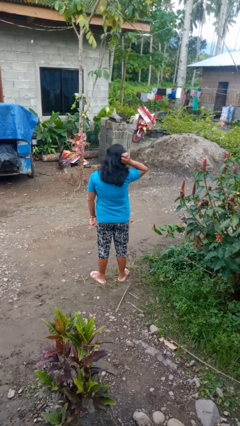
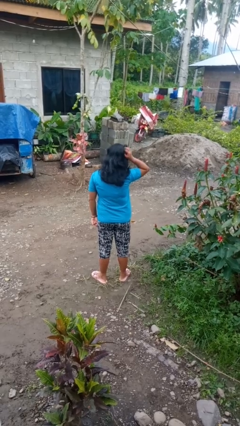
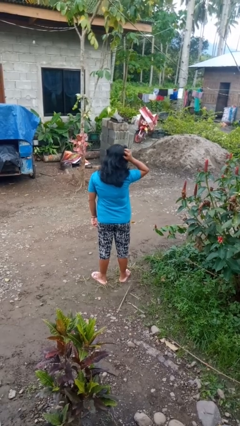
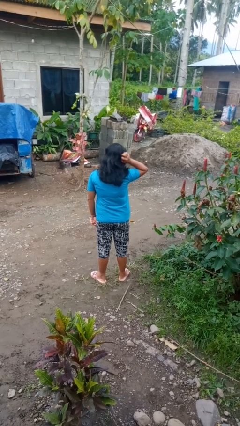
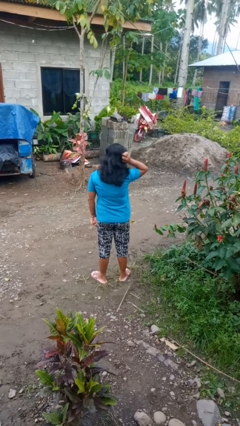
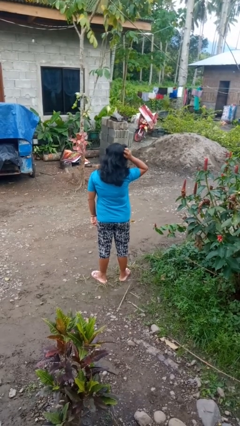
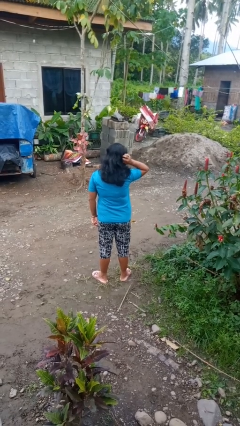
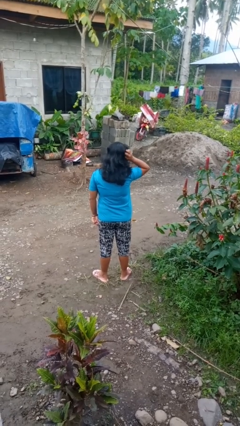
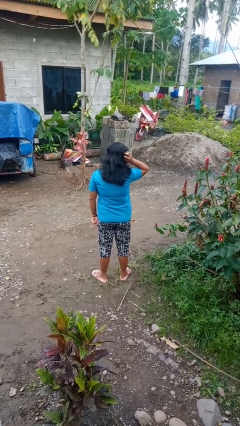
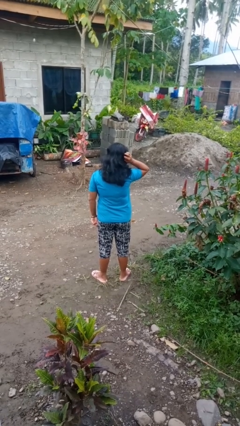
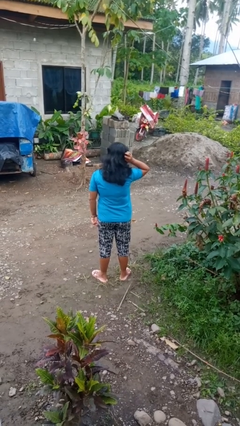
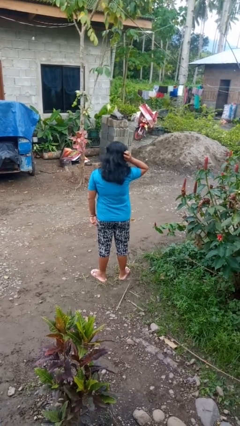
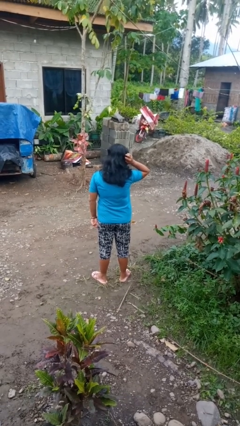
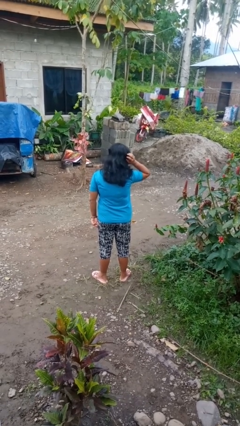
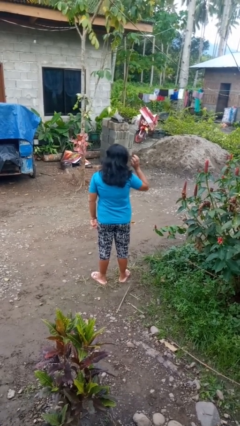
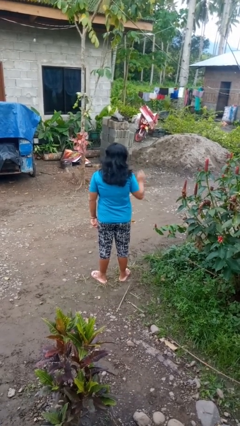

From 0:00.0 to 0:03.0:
person scratches face

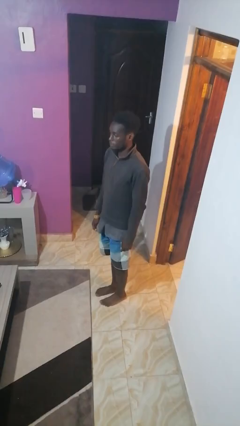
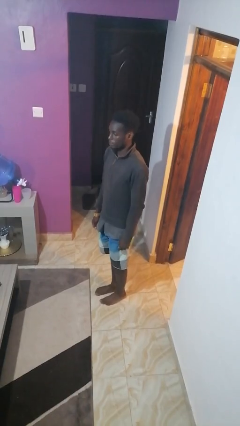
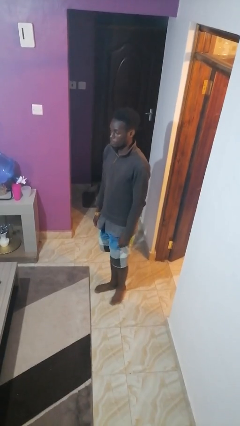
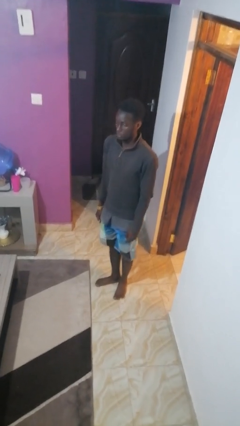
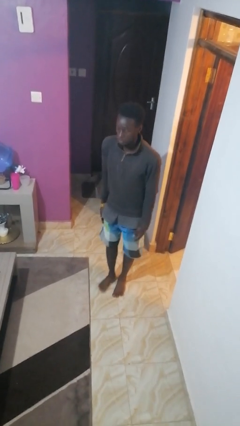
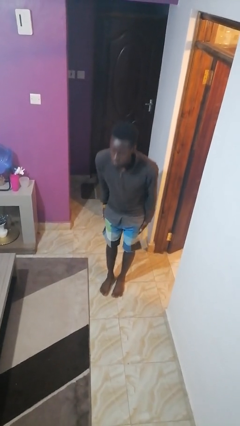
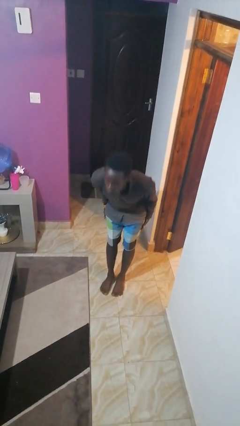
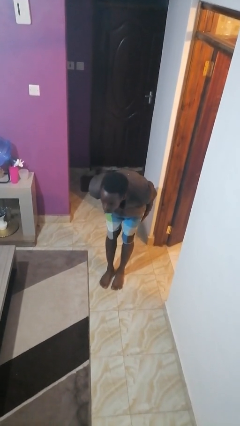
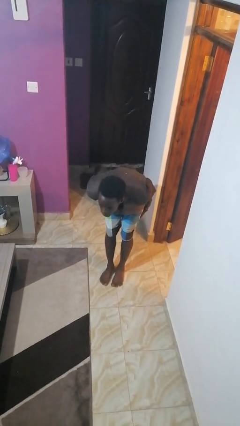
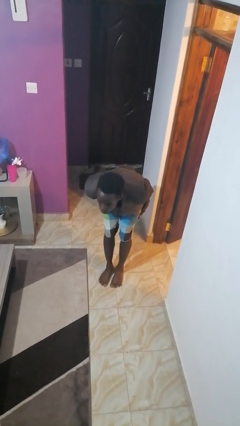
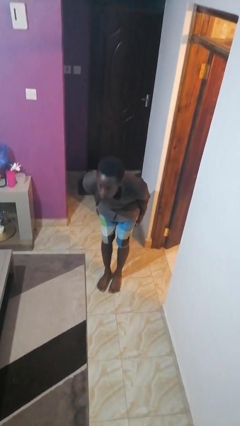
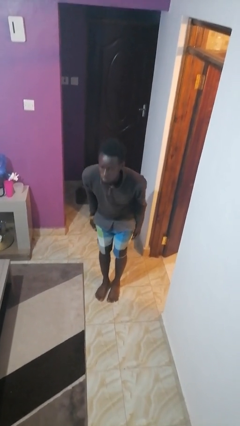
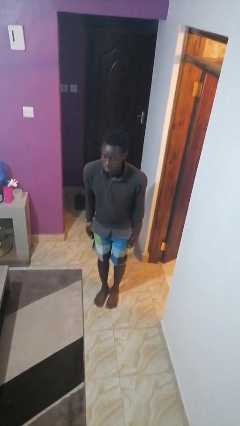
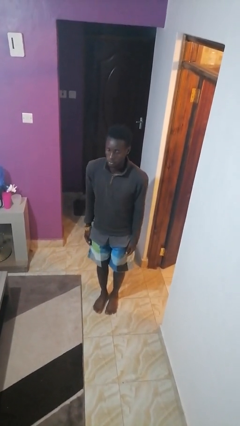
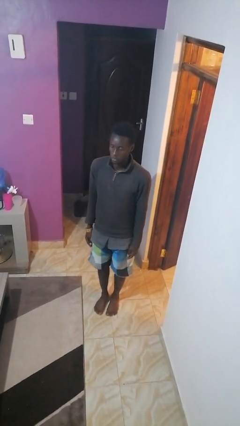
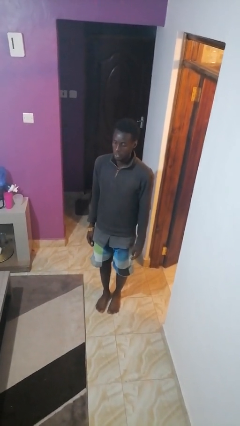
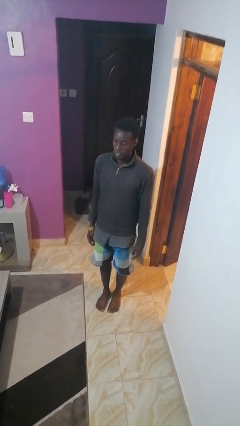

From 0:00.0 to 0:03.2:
person bows

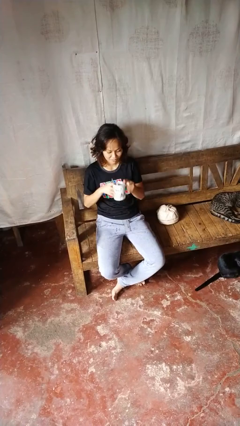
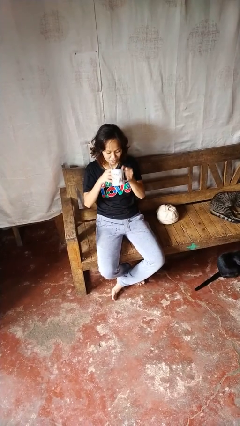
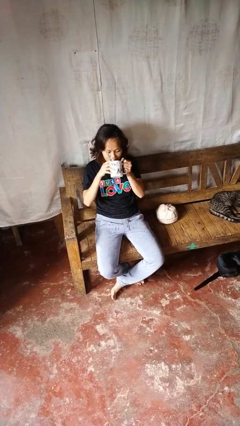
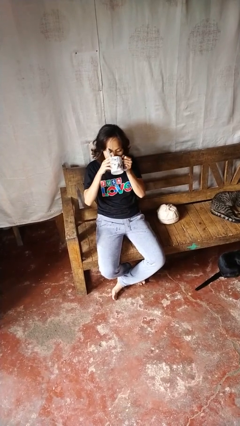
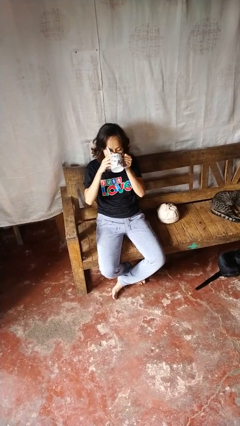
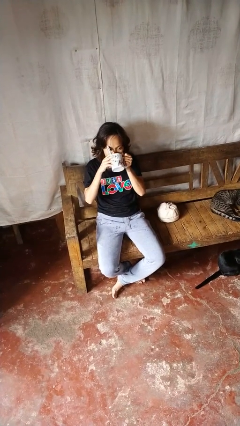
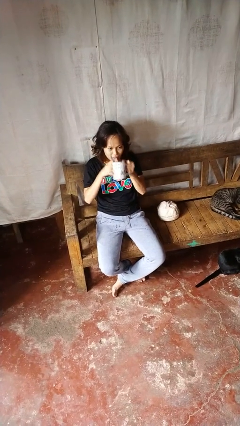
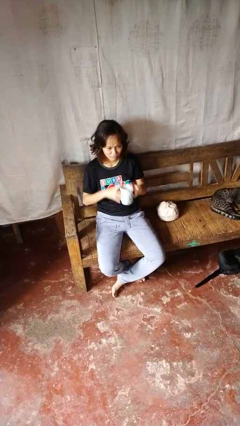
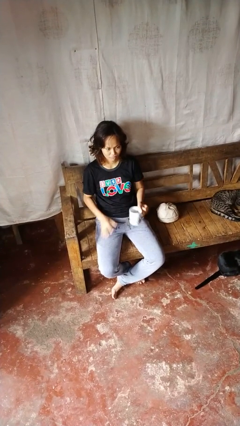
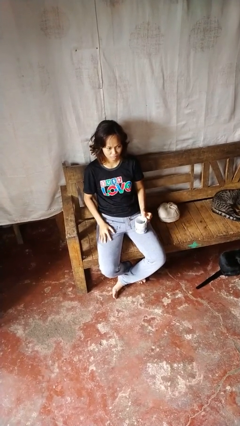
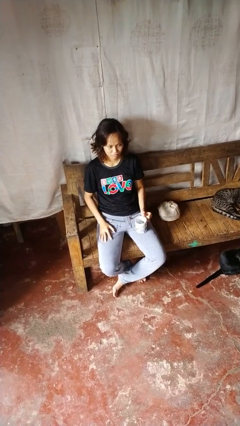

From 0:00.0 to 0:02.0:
person drinks from mug

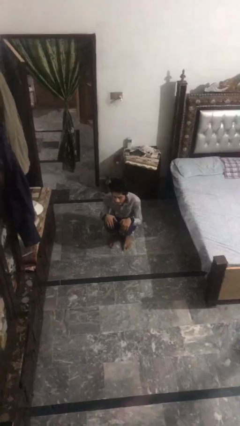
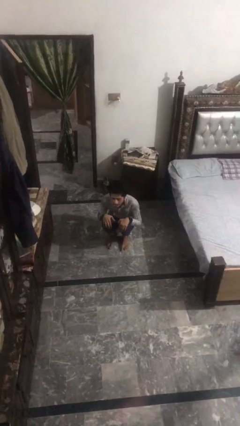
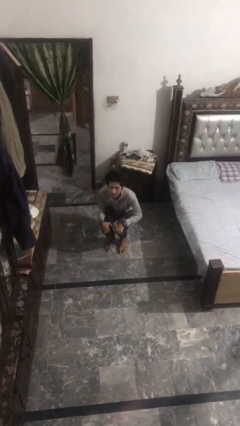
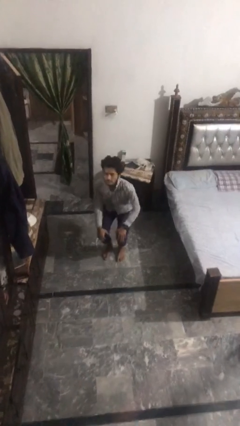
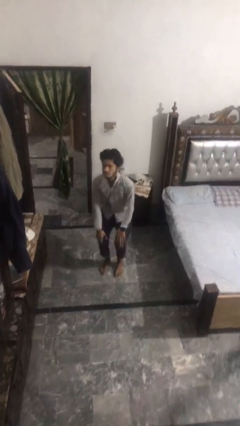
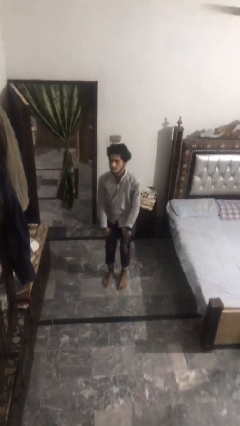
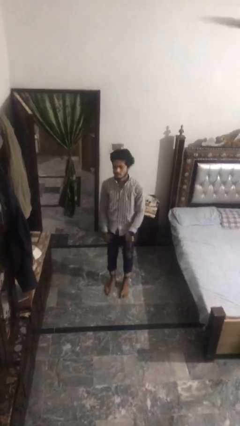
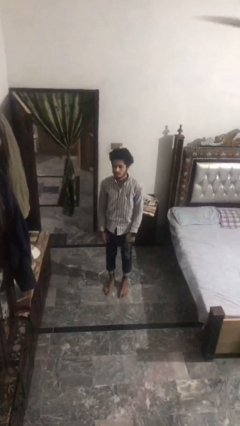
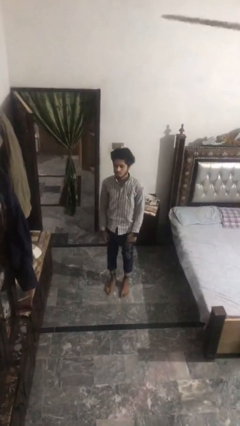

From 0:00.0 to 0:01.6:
person stands up

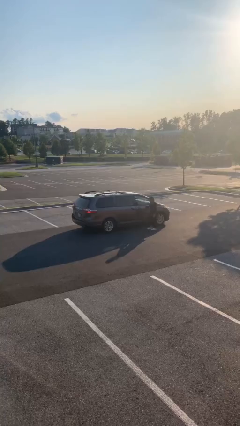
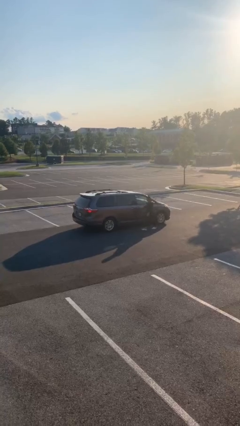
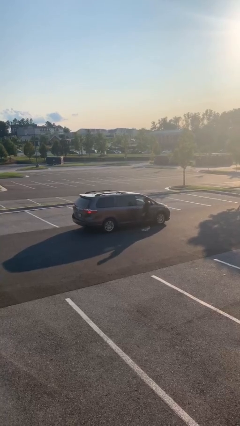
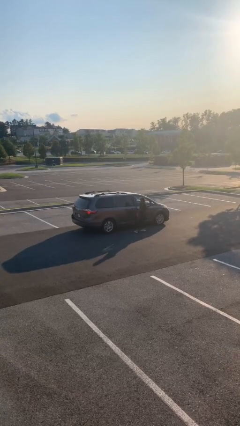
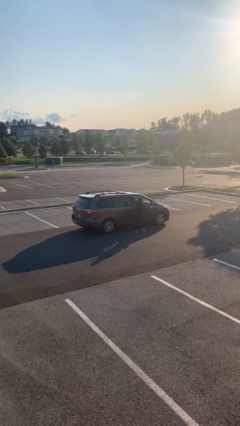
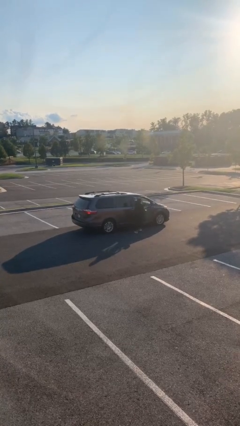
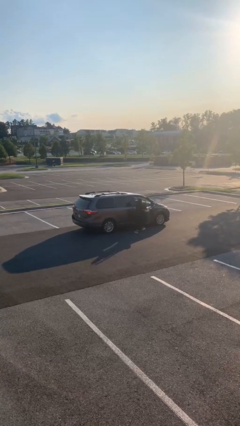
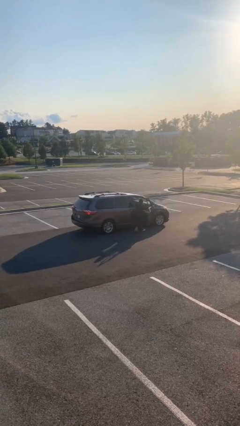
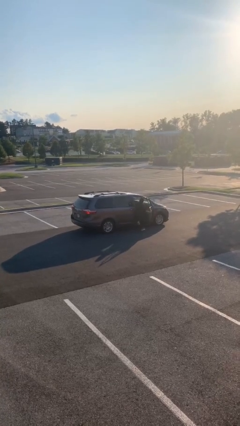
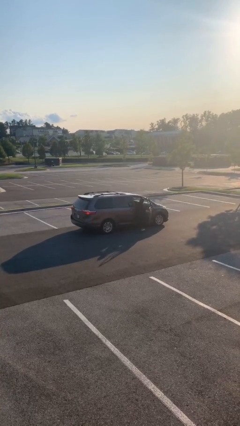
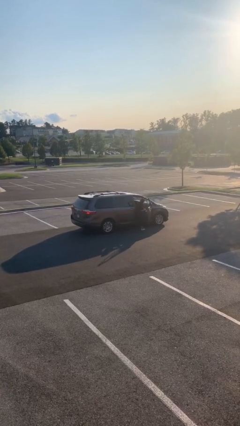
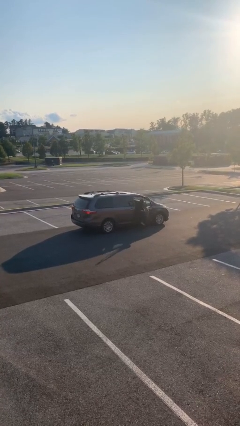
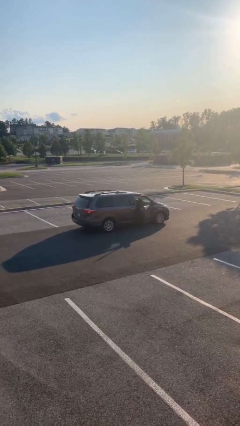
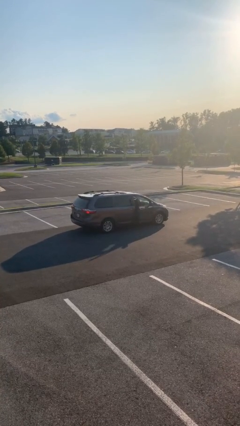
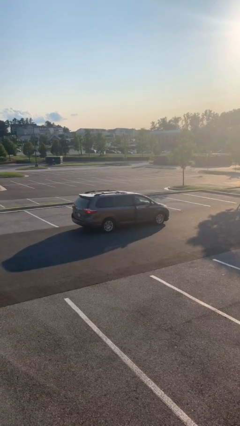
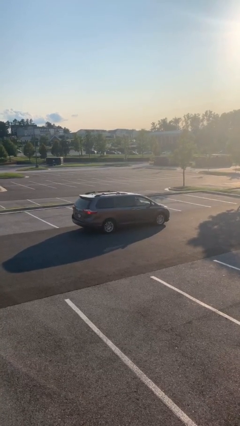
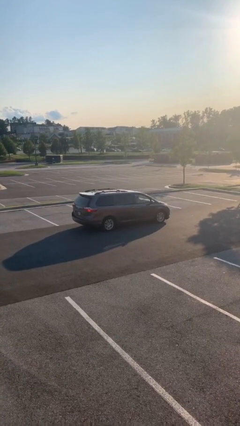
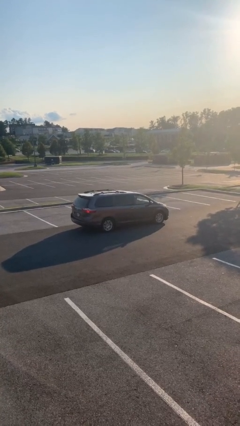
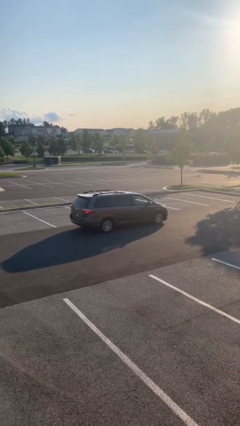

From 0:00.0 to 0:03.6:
car picks up person

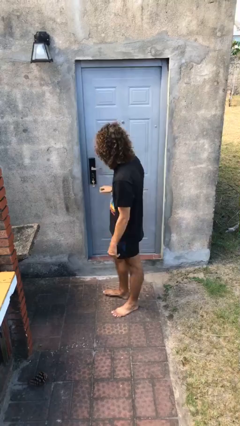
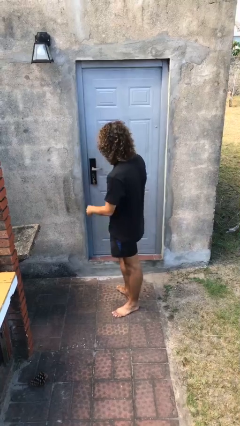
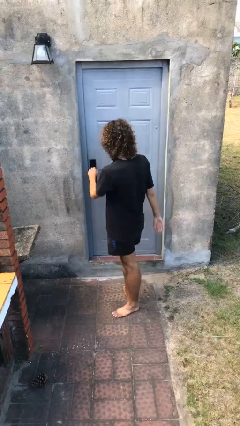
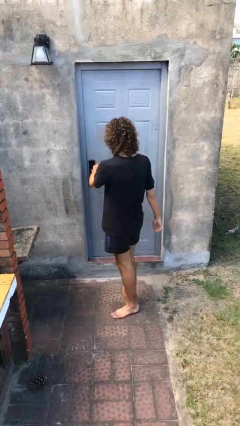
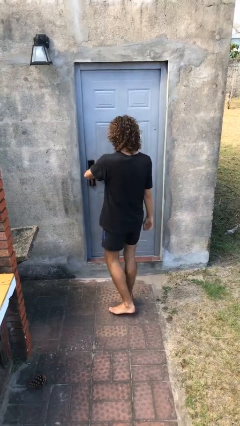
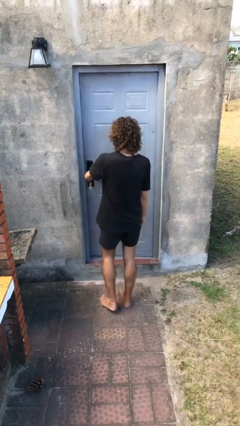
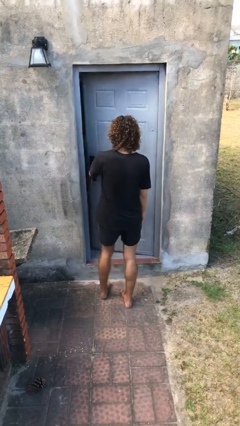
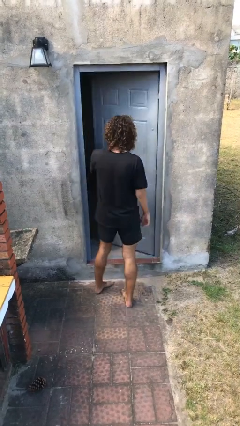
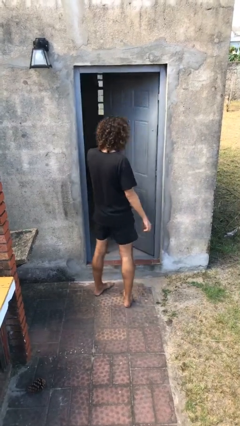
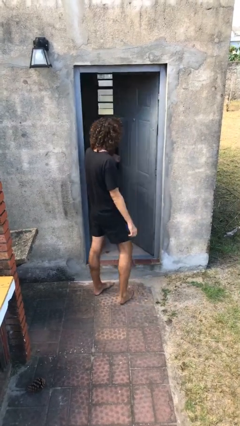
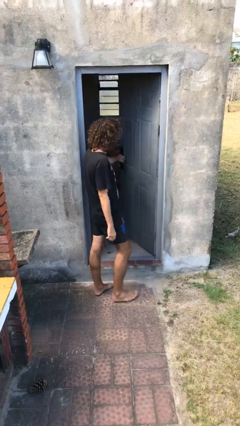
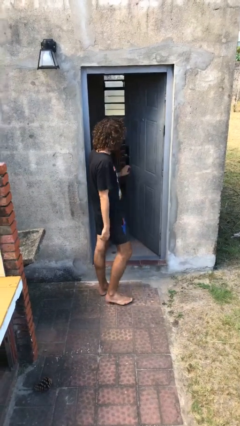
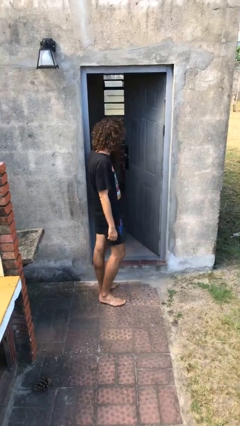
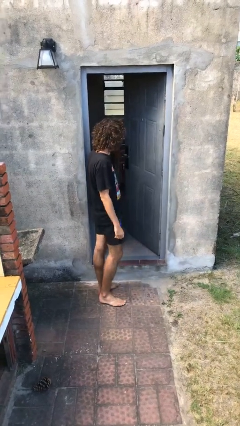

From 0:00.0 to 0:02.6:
person opens facility door

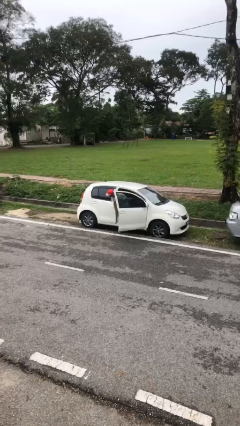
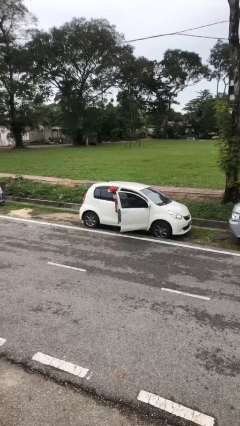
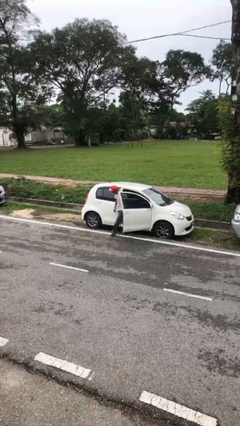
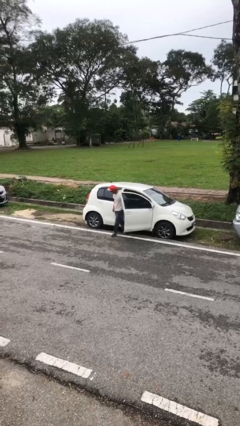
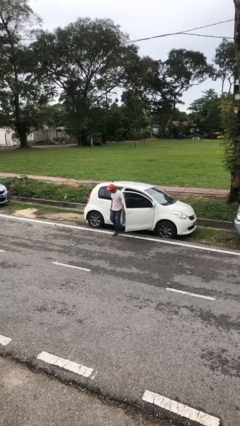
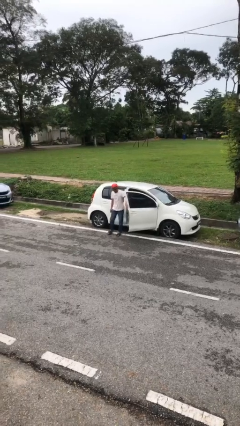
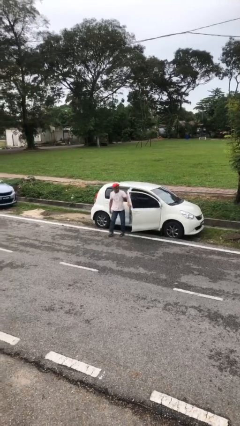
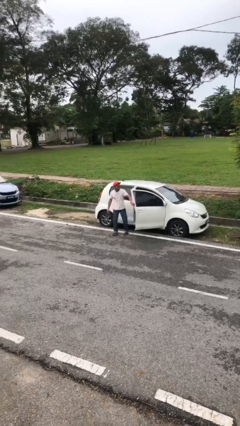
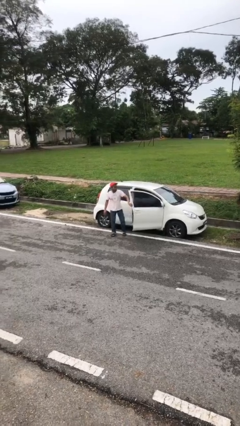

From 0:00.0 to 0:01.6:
person exits car
